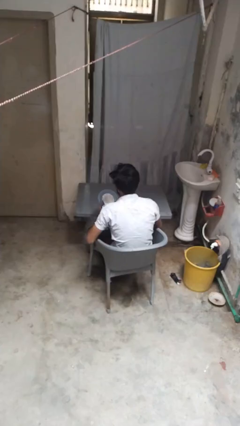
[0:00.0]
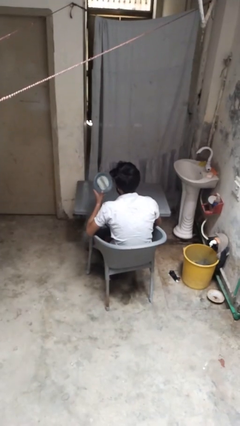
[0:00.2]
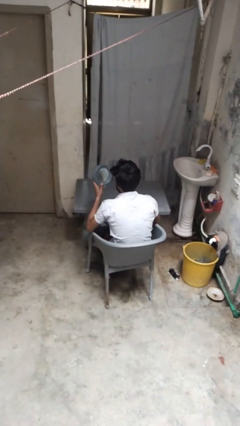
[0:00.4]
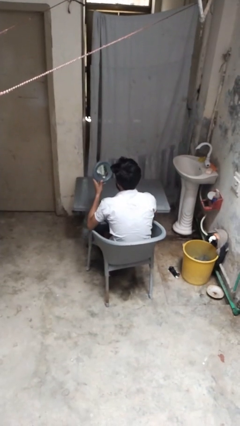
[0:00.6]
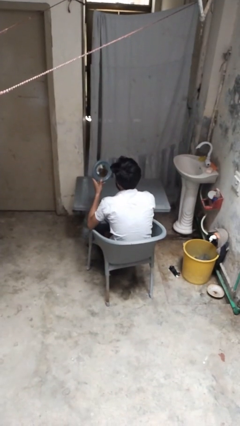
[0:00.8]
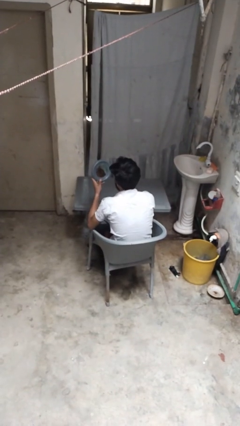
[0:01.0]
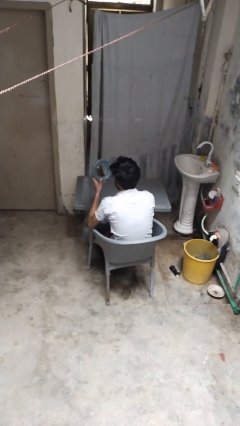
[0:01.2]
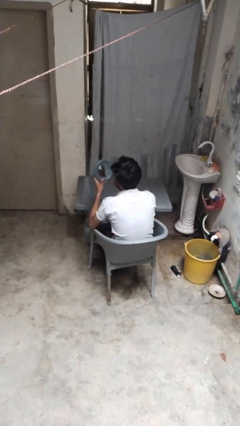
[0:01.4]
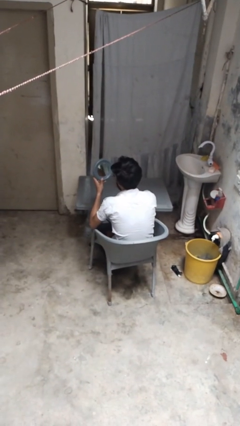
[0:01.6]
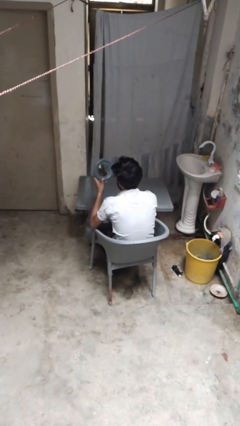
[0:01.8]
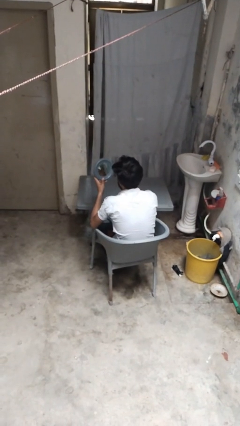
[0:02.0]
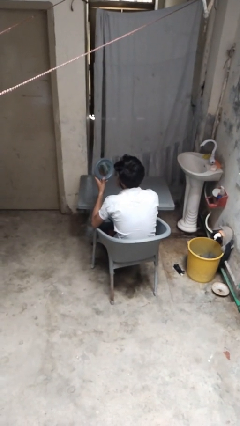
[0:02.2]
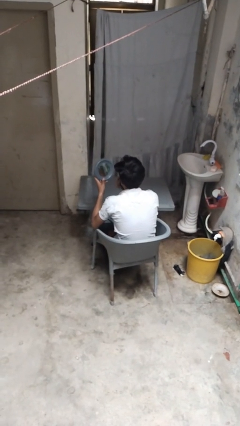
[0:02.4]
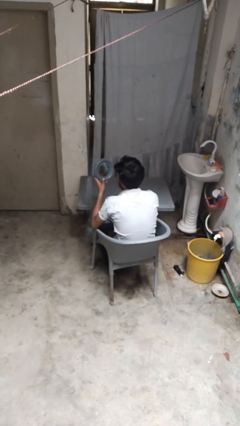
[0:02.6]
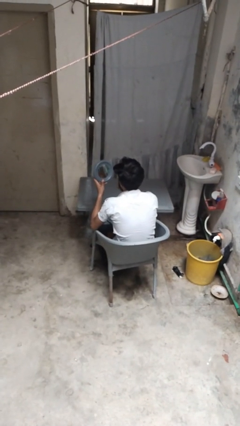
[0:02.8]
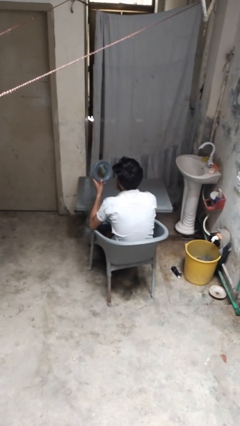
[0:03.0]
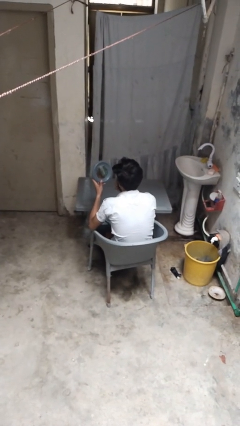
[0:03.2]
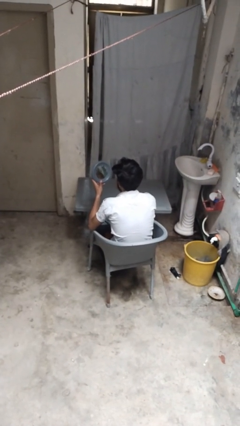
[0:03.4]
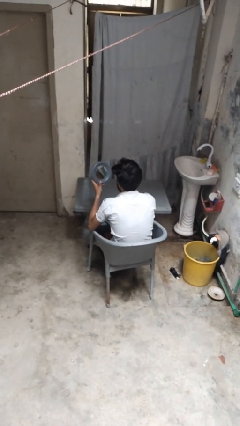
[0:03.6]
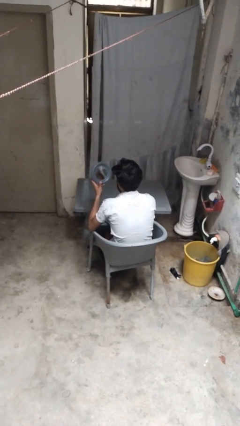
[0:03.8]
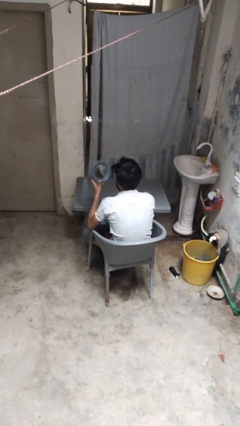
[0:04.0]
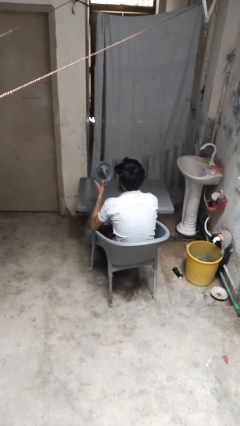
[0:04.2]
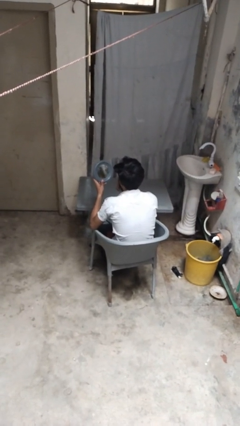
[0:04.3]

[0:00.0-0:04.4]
person applies lip makeup

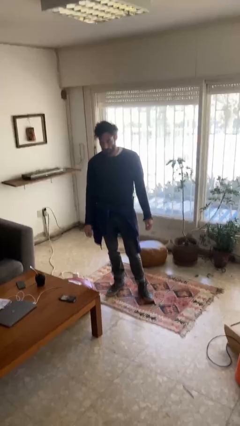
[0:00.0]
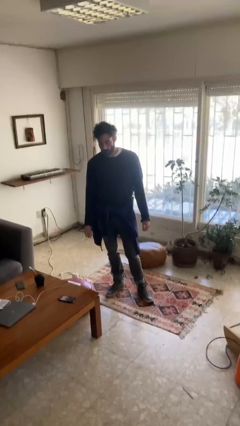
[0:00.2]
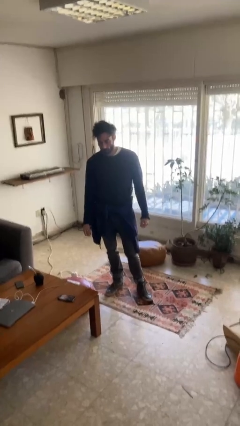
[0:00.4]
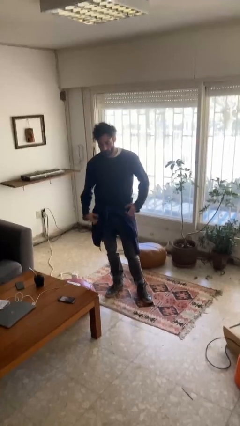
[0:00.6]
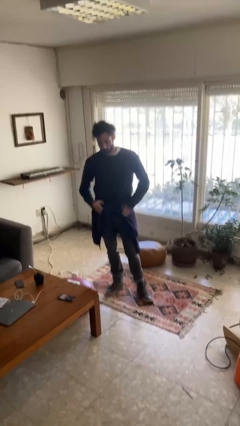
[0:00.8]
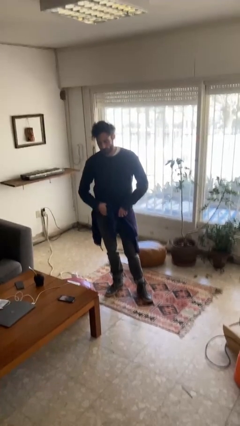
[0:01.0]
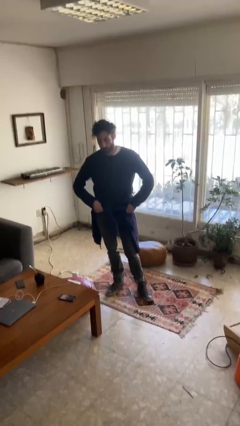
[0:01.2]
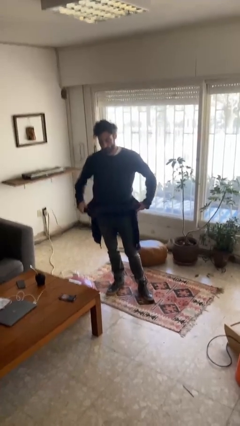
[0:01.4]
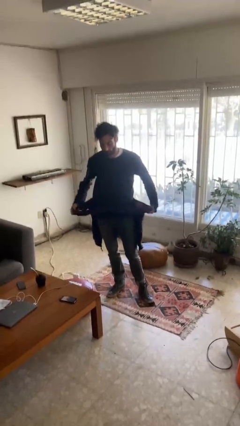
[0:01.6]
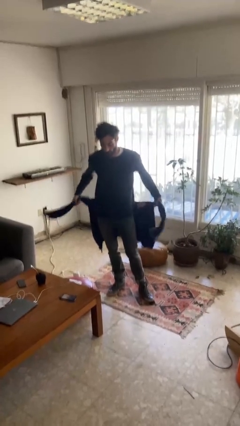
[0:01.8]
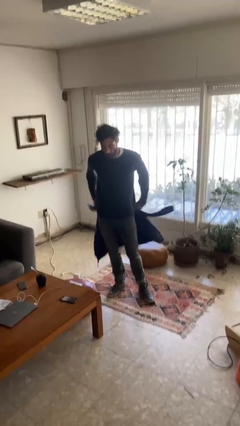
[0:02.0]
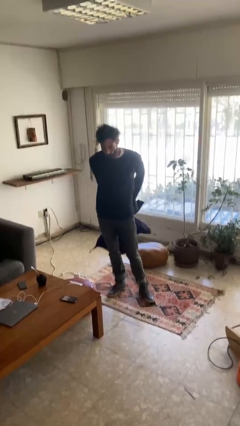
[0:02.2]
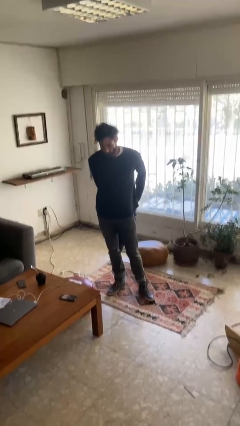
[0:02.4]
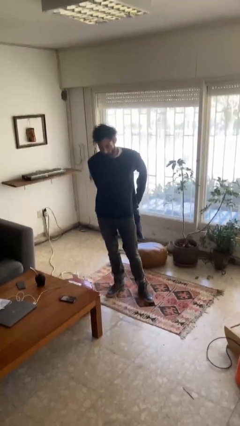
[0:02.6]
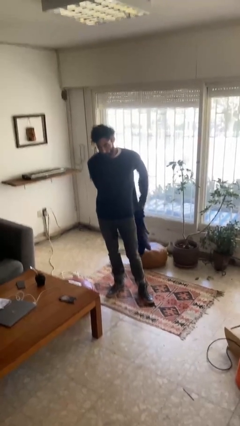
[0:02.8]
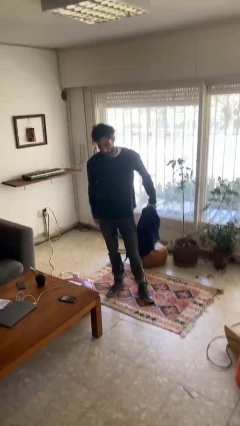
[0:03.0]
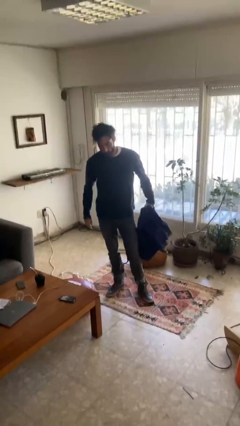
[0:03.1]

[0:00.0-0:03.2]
person unties jacket around waist

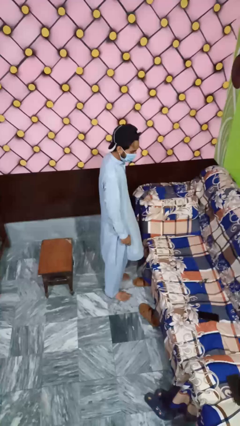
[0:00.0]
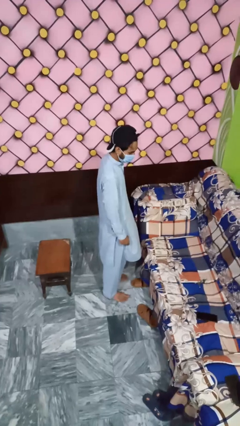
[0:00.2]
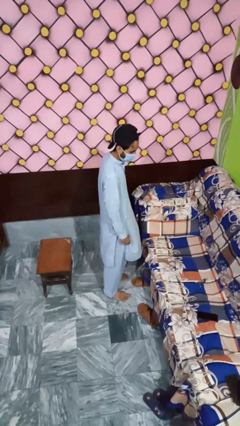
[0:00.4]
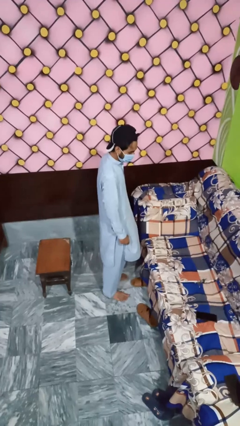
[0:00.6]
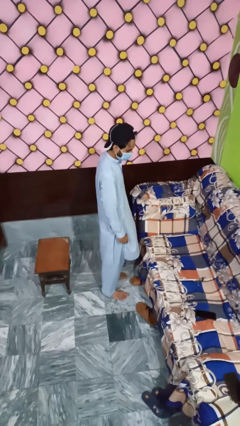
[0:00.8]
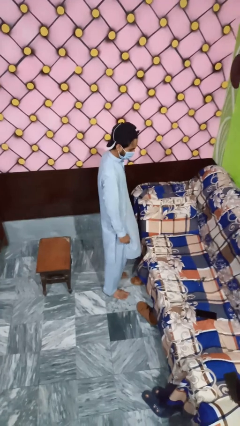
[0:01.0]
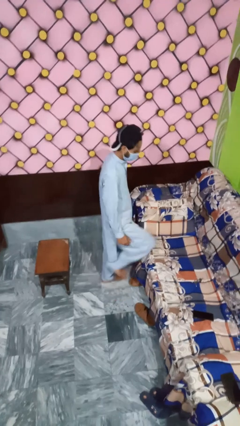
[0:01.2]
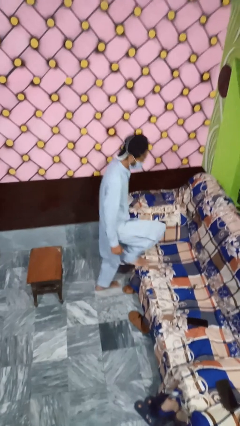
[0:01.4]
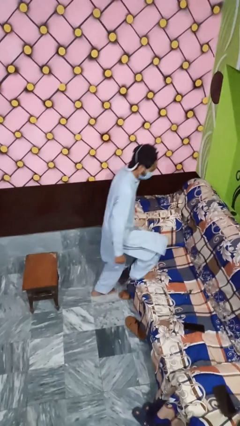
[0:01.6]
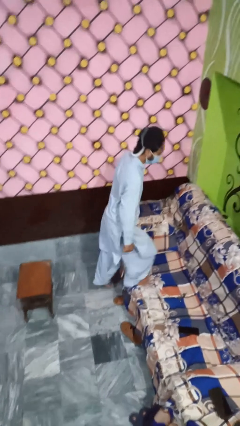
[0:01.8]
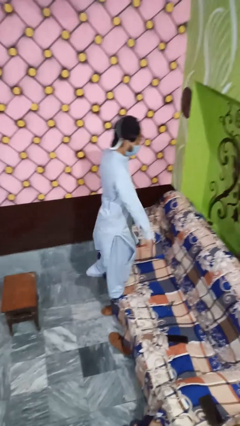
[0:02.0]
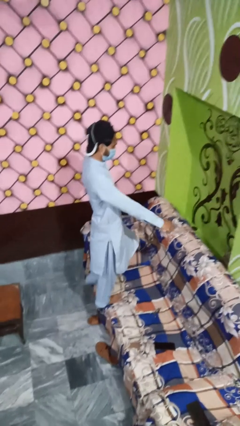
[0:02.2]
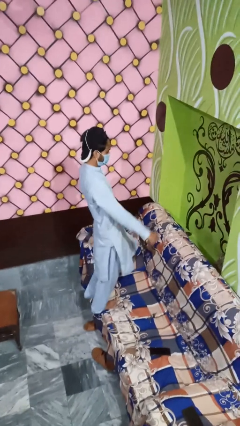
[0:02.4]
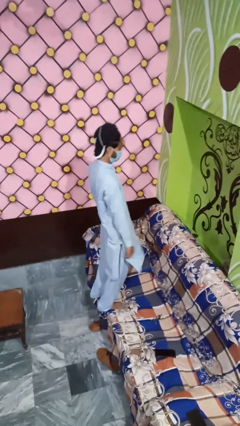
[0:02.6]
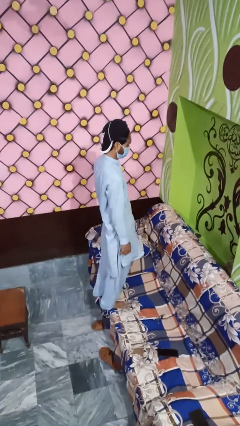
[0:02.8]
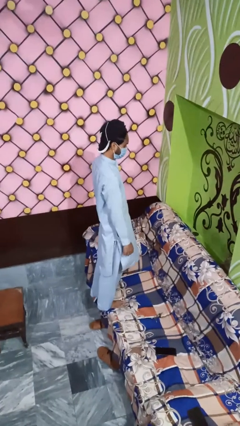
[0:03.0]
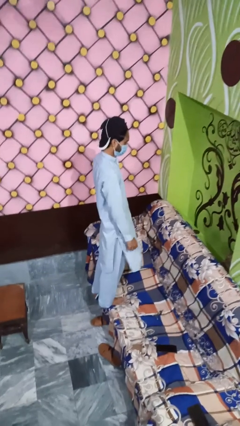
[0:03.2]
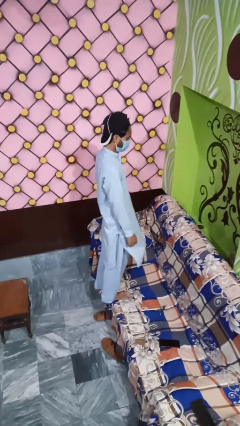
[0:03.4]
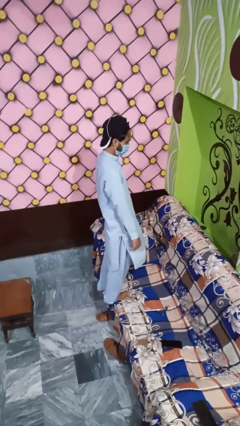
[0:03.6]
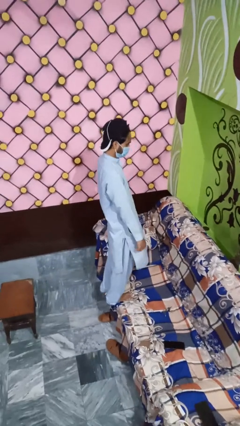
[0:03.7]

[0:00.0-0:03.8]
person climbs on couch

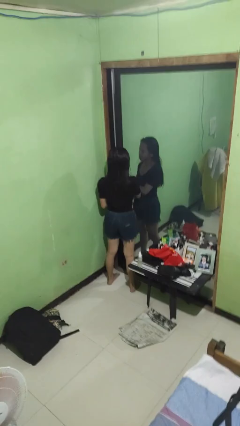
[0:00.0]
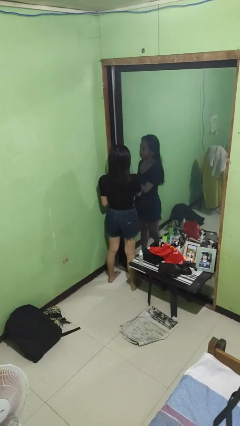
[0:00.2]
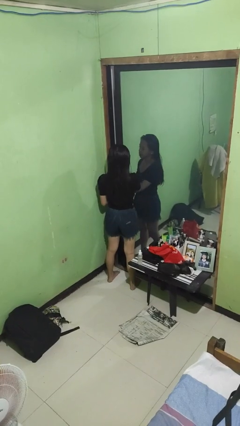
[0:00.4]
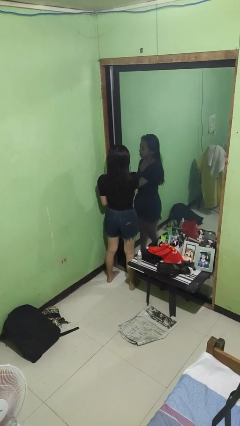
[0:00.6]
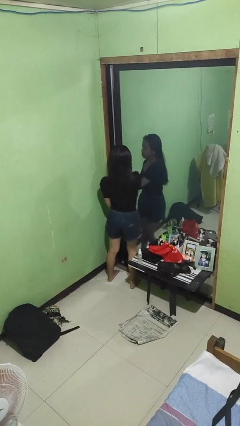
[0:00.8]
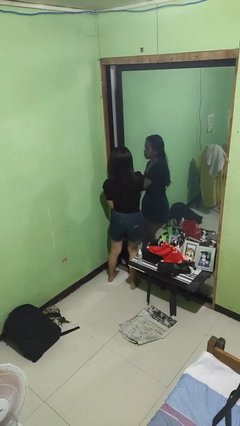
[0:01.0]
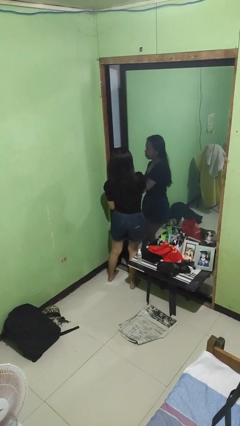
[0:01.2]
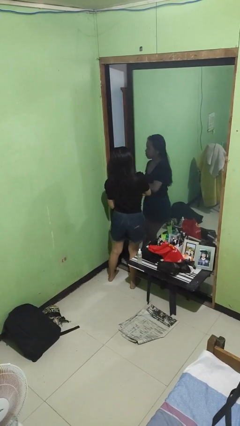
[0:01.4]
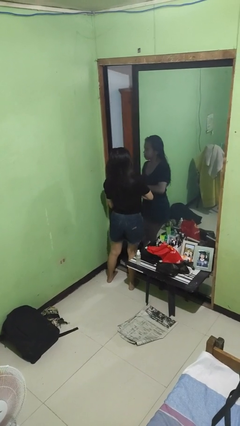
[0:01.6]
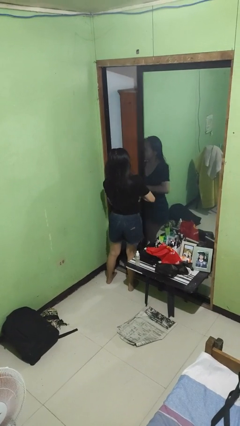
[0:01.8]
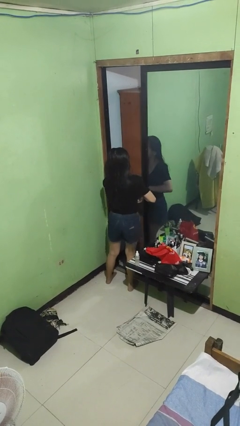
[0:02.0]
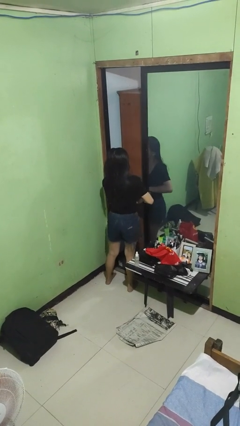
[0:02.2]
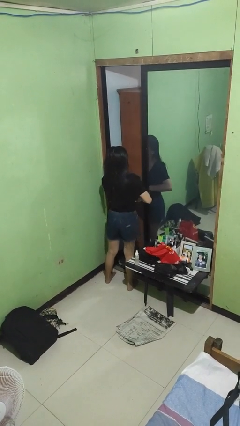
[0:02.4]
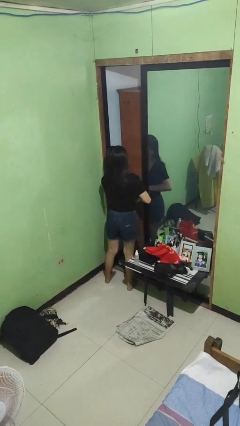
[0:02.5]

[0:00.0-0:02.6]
person opens sliding door

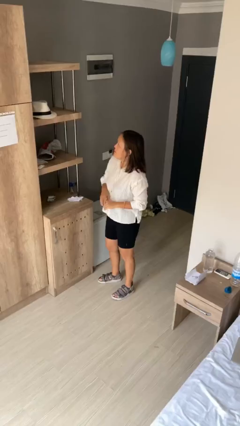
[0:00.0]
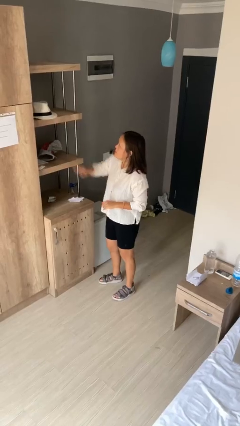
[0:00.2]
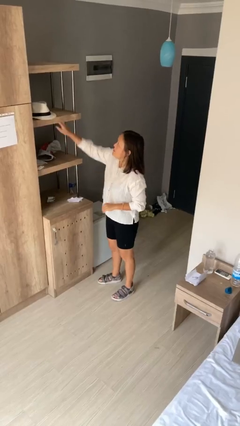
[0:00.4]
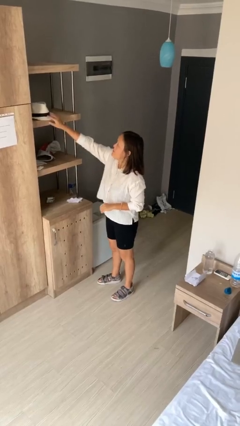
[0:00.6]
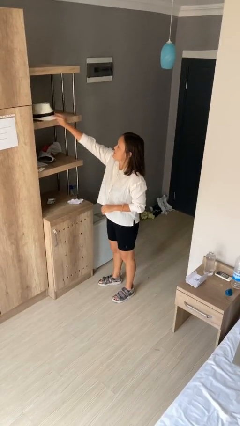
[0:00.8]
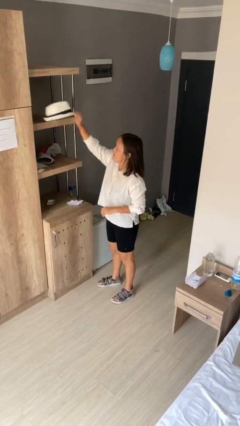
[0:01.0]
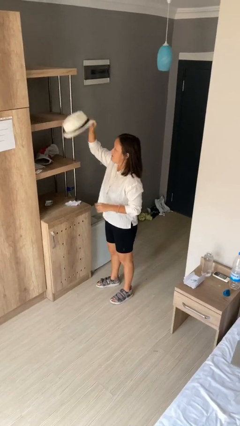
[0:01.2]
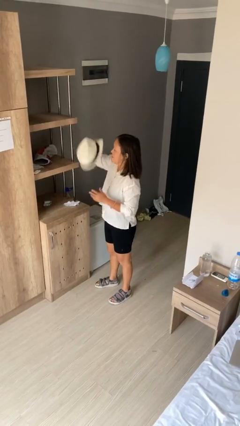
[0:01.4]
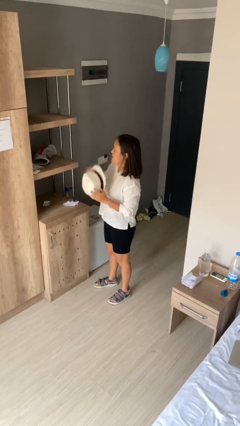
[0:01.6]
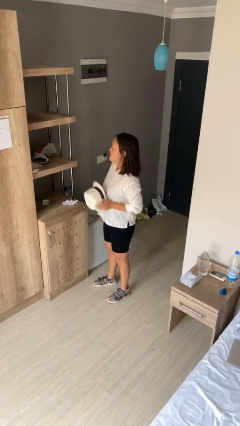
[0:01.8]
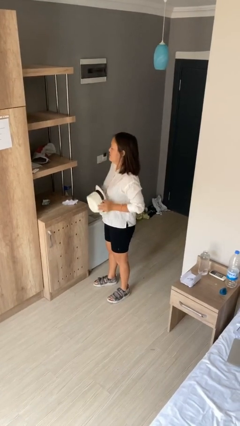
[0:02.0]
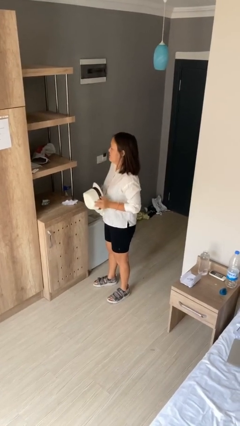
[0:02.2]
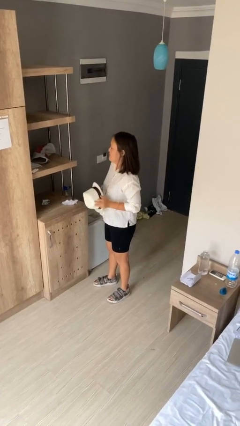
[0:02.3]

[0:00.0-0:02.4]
person picks up object from shelf

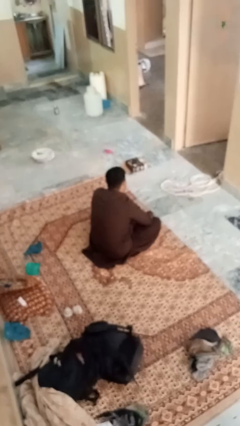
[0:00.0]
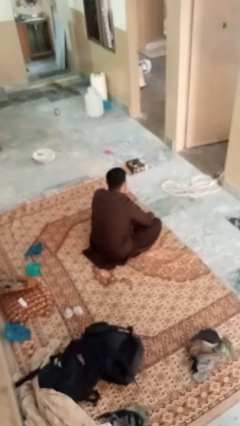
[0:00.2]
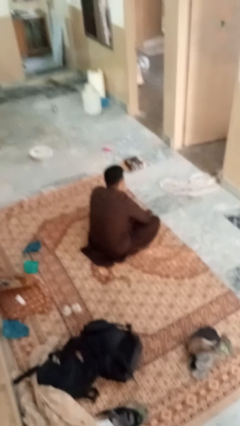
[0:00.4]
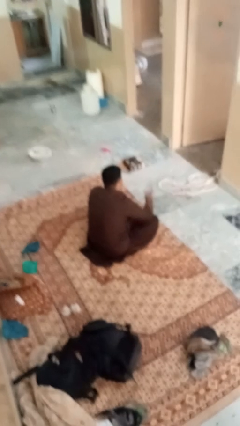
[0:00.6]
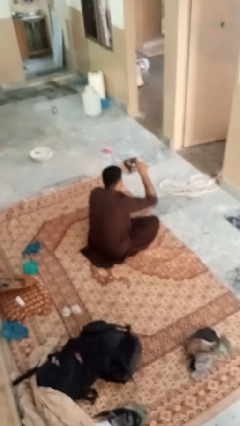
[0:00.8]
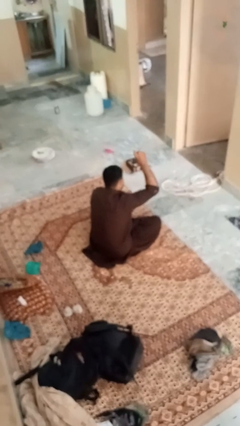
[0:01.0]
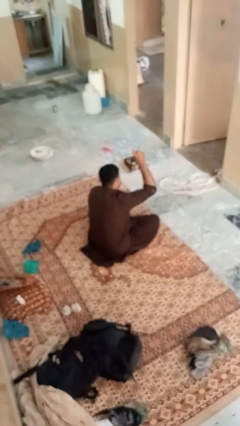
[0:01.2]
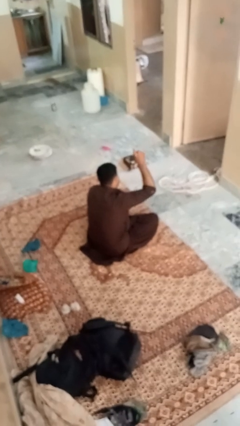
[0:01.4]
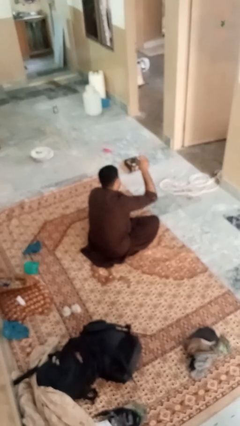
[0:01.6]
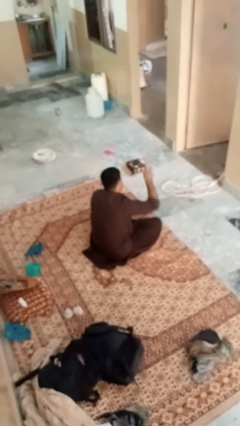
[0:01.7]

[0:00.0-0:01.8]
person gestures number one
